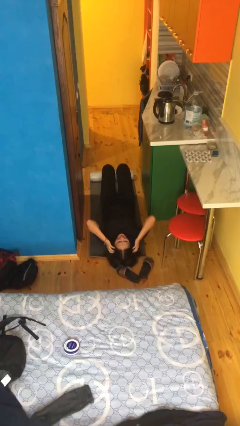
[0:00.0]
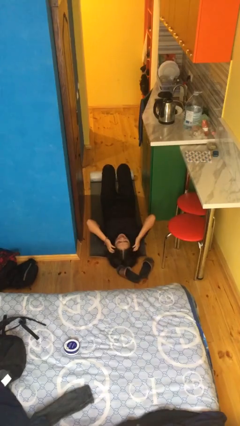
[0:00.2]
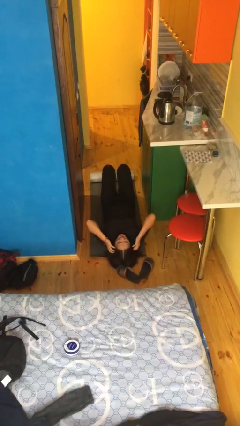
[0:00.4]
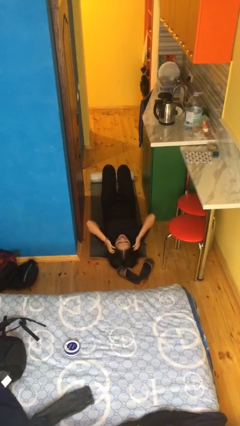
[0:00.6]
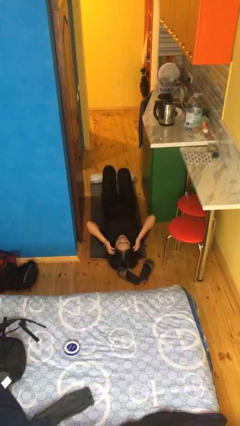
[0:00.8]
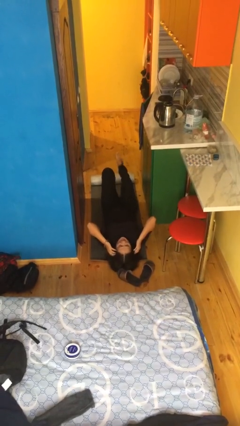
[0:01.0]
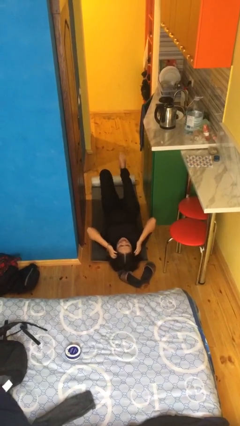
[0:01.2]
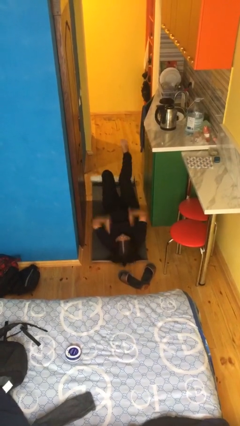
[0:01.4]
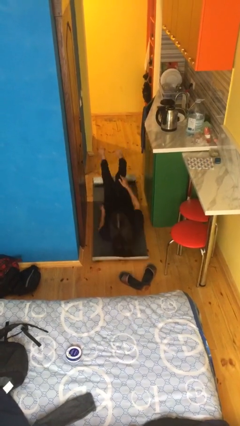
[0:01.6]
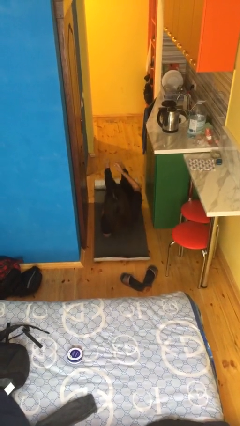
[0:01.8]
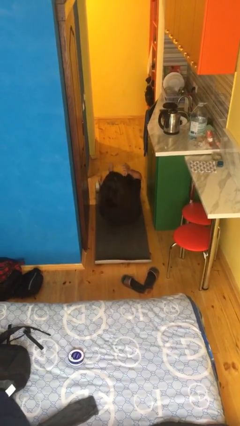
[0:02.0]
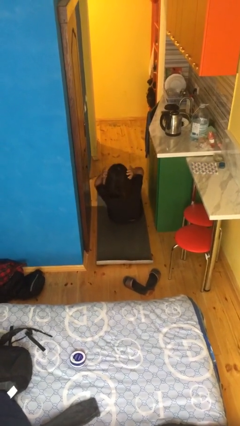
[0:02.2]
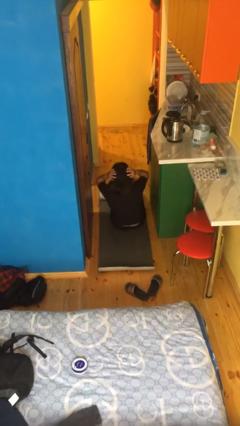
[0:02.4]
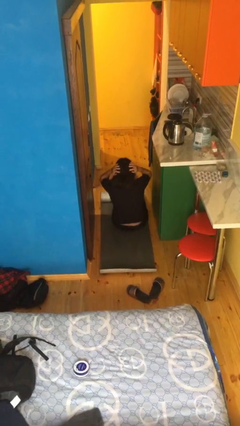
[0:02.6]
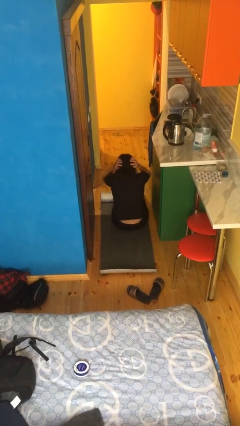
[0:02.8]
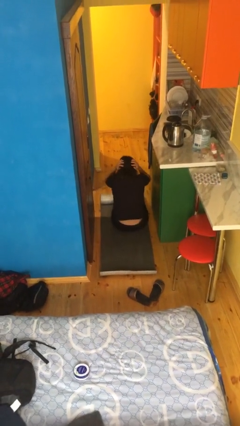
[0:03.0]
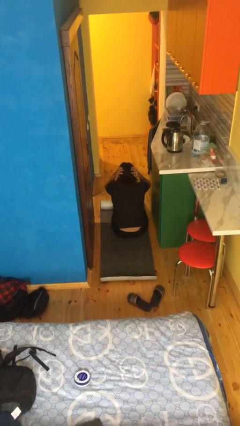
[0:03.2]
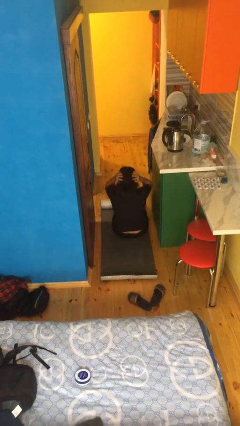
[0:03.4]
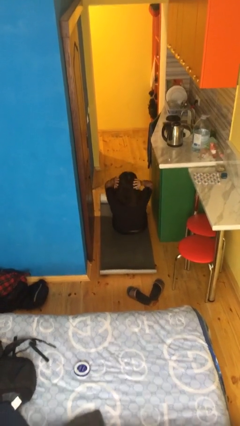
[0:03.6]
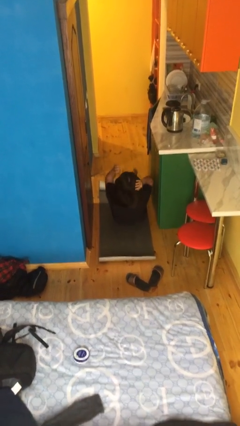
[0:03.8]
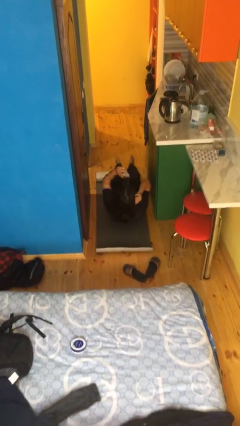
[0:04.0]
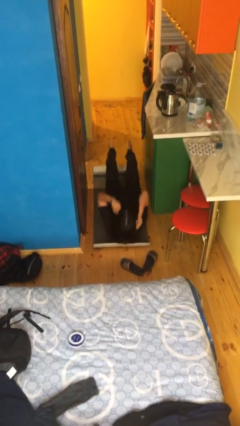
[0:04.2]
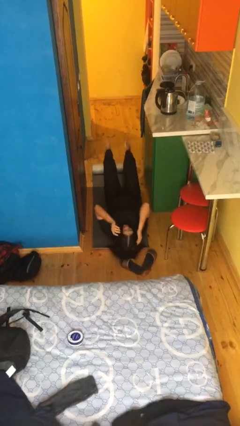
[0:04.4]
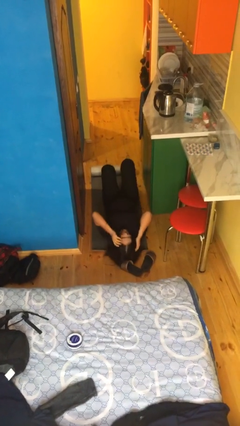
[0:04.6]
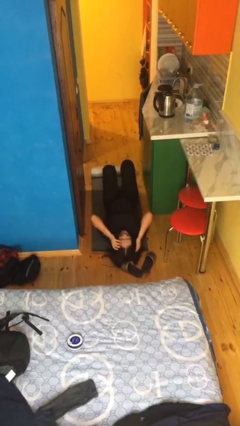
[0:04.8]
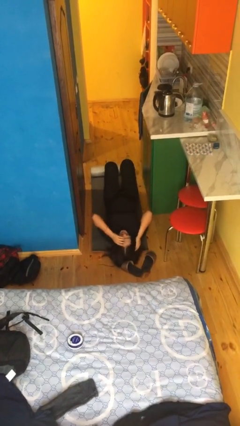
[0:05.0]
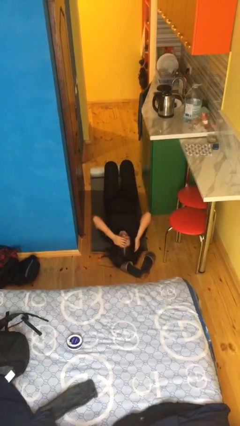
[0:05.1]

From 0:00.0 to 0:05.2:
person exercises with situp

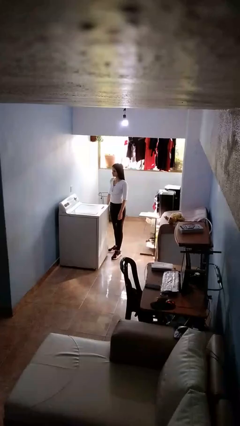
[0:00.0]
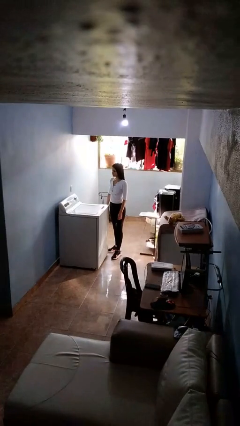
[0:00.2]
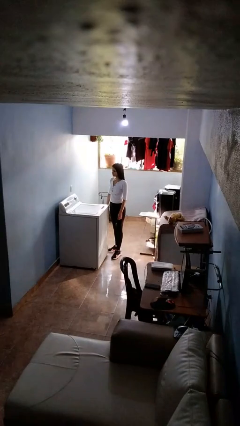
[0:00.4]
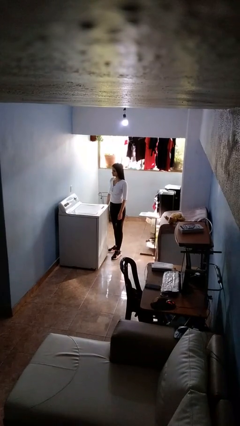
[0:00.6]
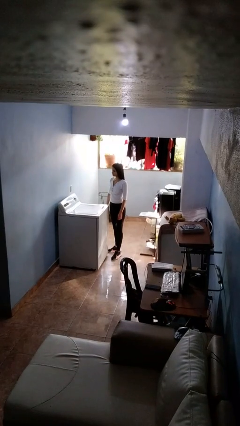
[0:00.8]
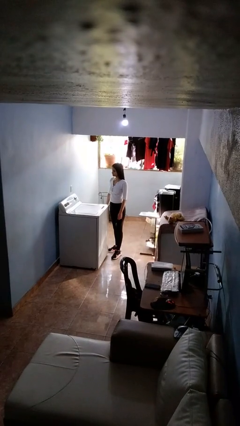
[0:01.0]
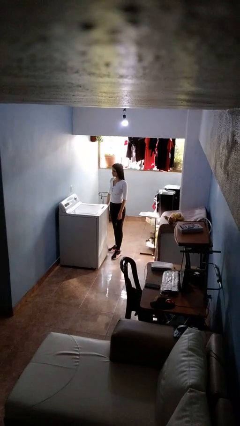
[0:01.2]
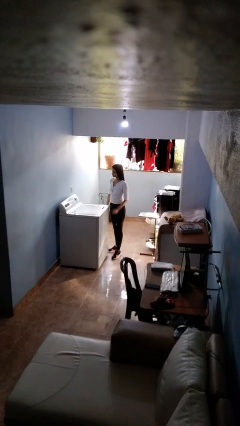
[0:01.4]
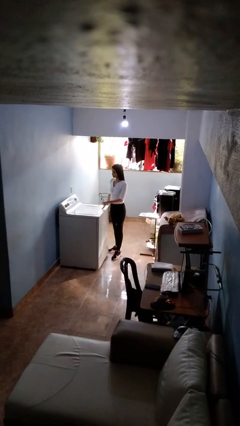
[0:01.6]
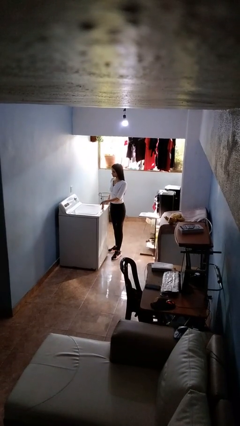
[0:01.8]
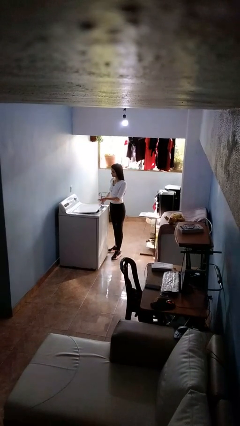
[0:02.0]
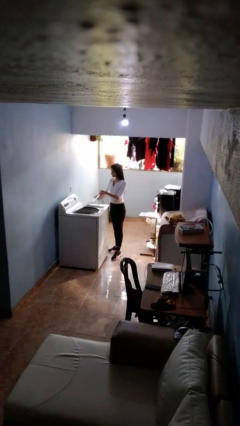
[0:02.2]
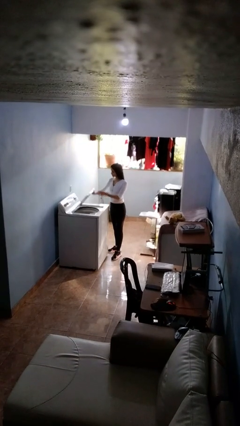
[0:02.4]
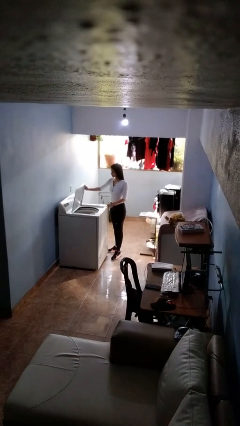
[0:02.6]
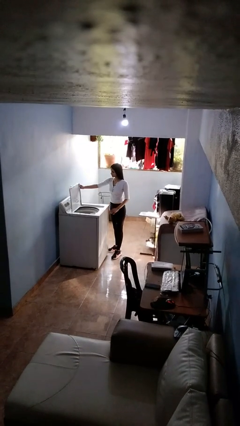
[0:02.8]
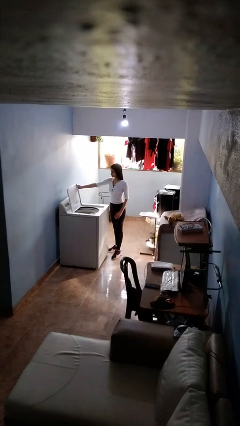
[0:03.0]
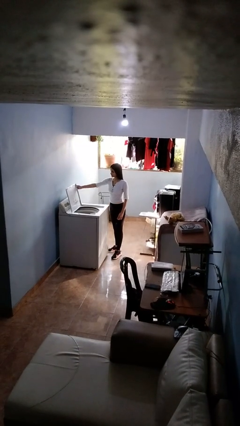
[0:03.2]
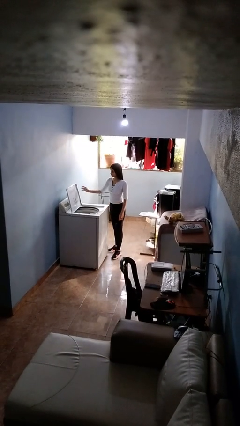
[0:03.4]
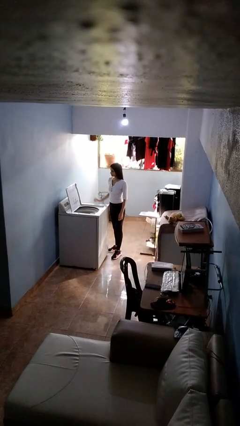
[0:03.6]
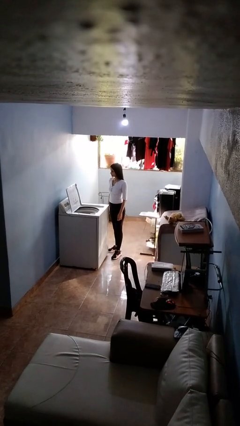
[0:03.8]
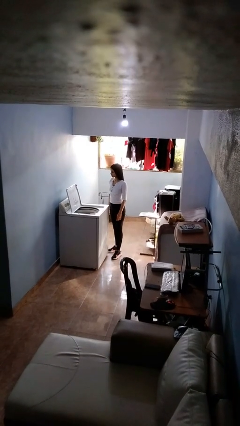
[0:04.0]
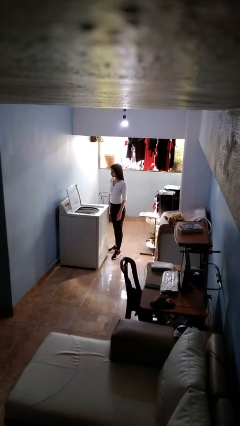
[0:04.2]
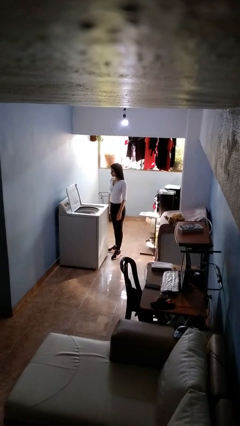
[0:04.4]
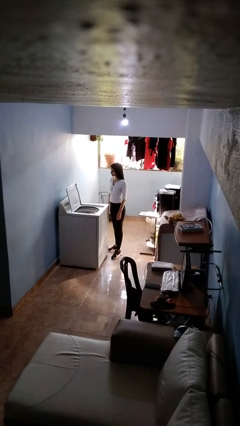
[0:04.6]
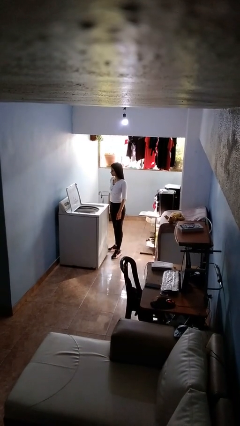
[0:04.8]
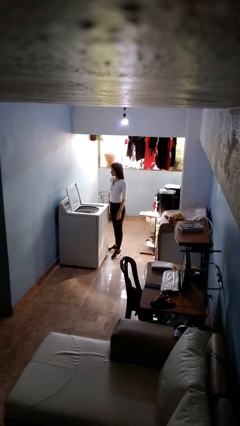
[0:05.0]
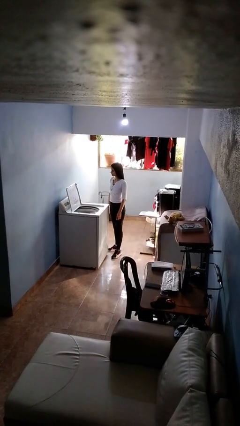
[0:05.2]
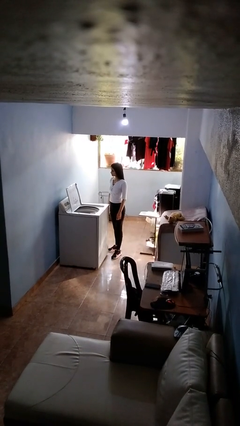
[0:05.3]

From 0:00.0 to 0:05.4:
person opens clothes washer

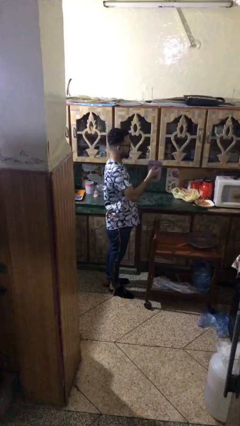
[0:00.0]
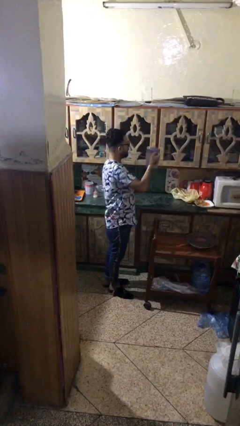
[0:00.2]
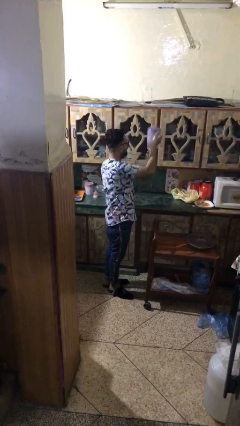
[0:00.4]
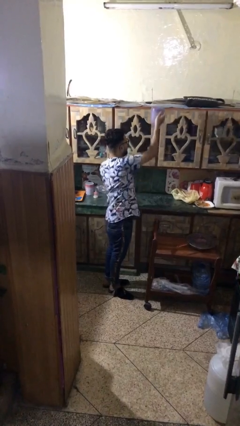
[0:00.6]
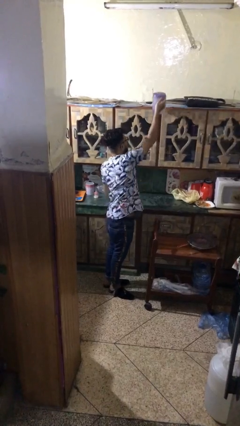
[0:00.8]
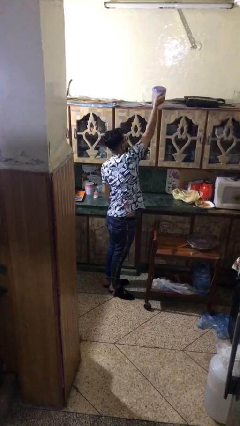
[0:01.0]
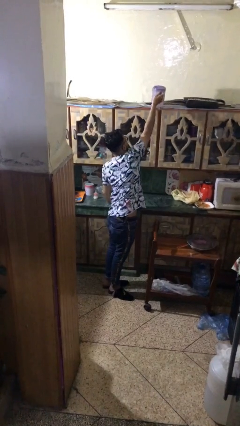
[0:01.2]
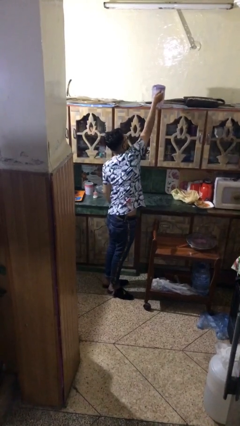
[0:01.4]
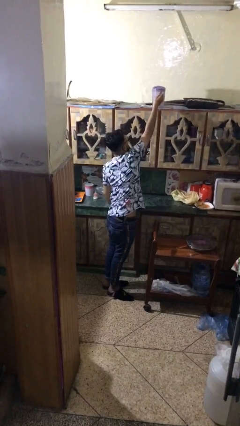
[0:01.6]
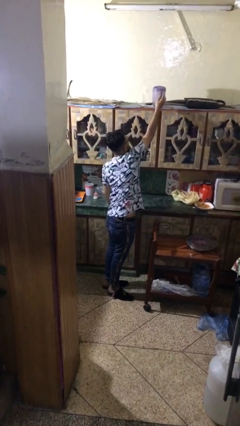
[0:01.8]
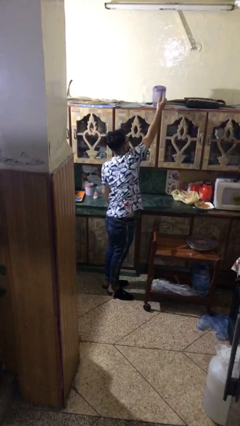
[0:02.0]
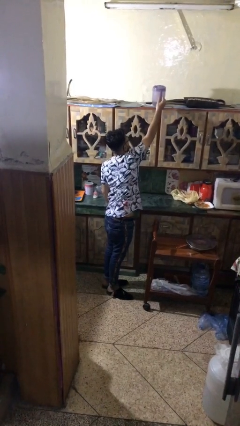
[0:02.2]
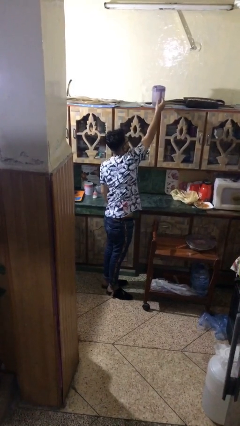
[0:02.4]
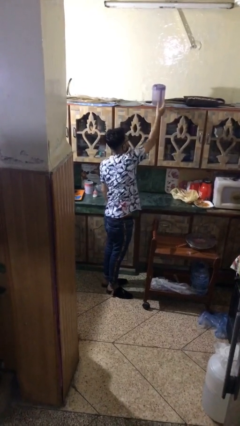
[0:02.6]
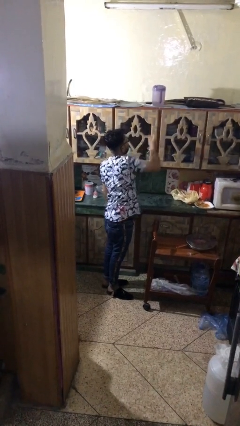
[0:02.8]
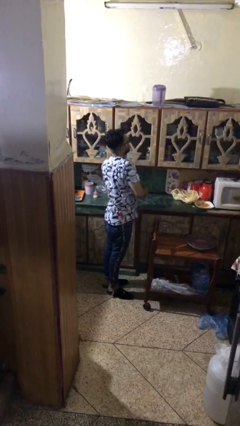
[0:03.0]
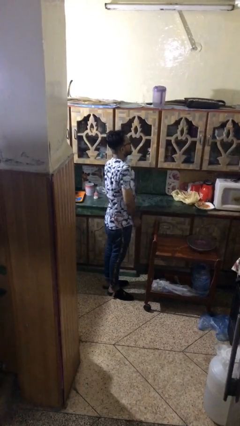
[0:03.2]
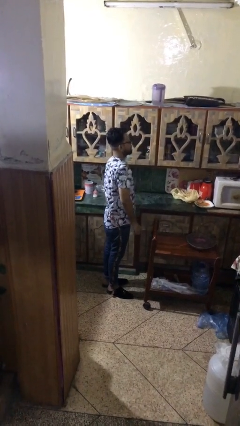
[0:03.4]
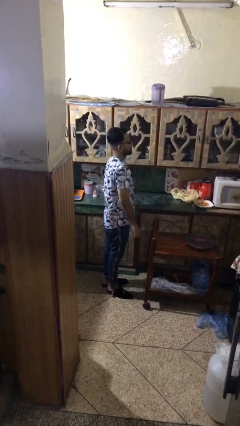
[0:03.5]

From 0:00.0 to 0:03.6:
person puts down object on shelf

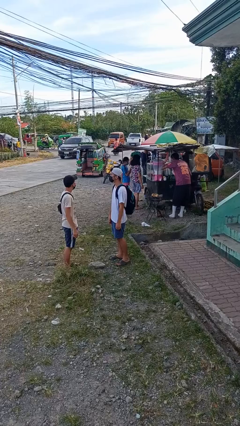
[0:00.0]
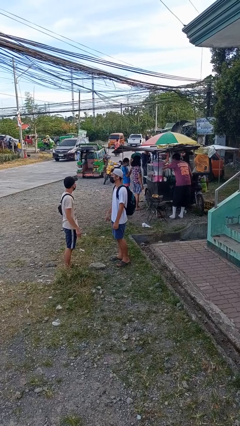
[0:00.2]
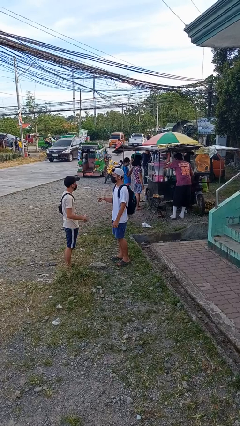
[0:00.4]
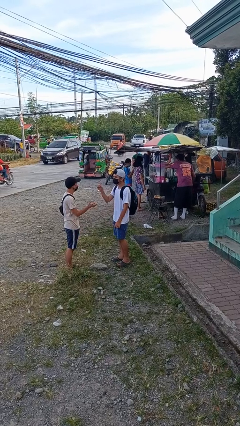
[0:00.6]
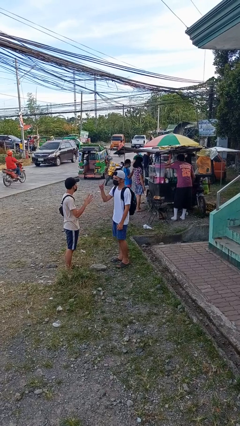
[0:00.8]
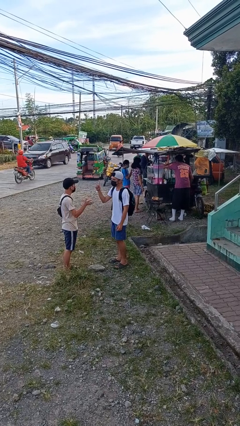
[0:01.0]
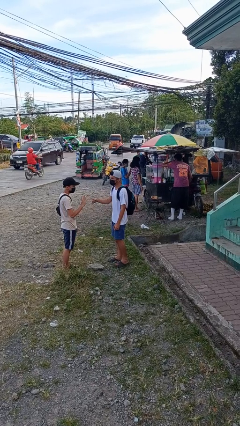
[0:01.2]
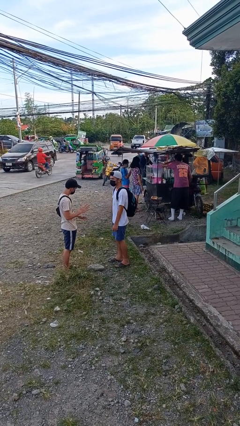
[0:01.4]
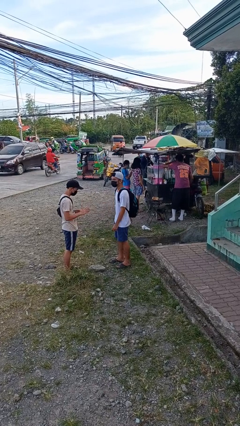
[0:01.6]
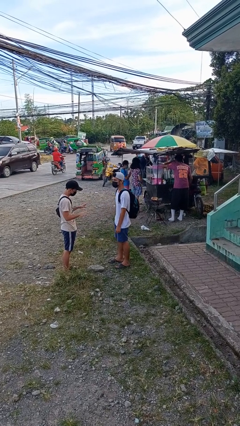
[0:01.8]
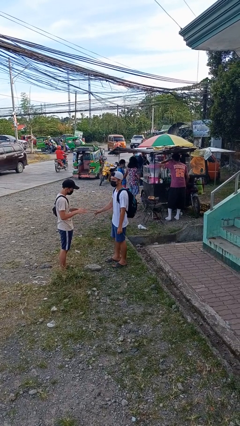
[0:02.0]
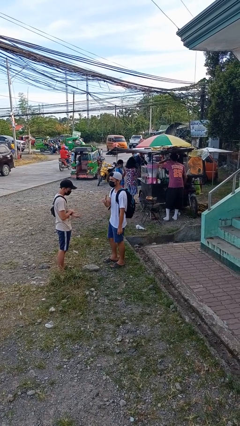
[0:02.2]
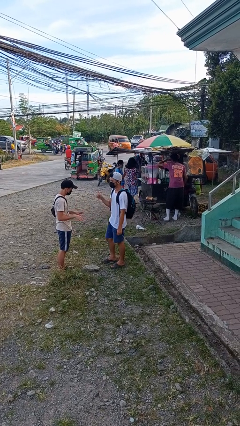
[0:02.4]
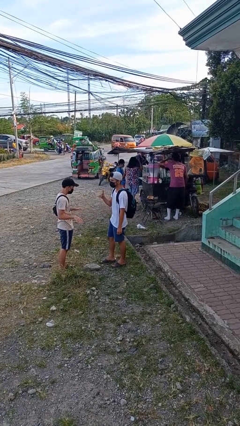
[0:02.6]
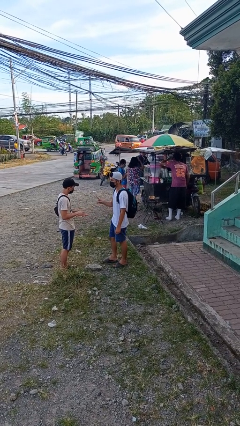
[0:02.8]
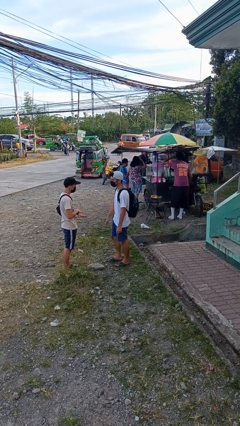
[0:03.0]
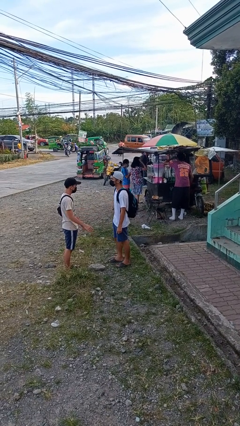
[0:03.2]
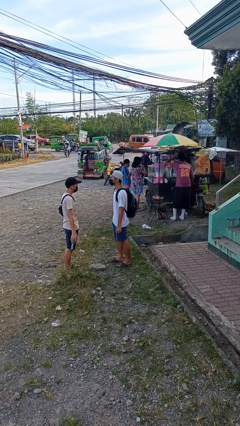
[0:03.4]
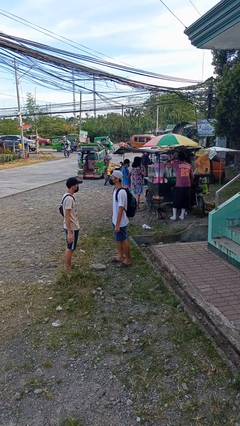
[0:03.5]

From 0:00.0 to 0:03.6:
person talks to person
